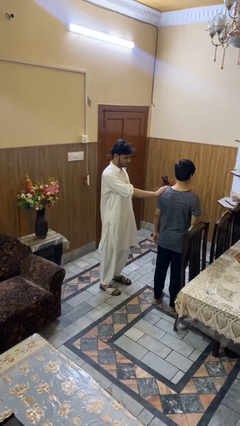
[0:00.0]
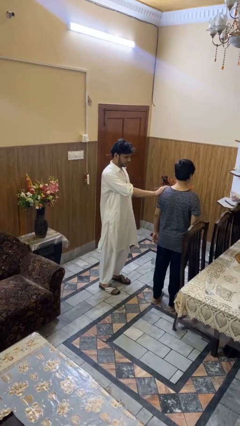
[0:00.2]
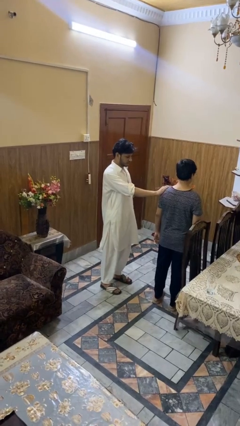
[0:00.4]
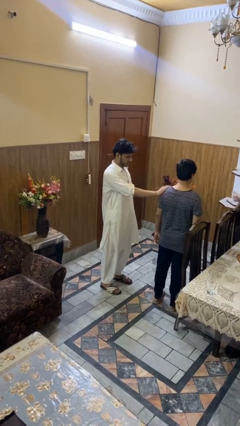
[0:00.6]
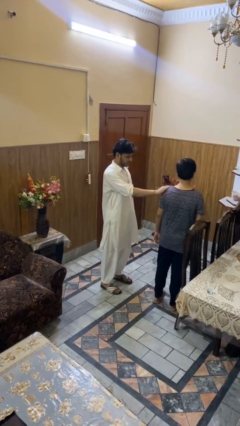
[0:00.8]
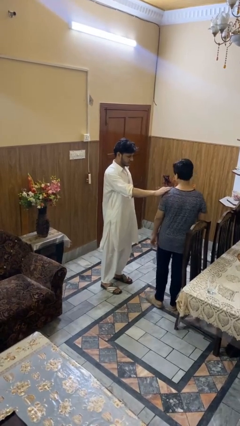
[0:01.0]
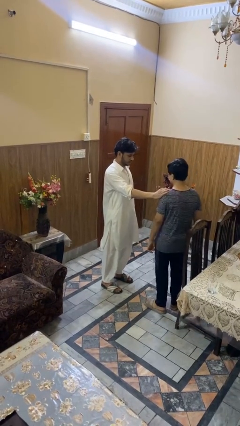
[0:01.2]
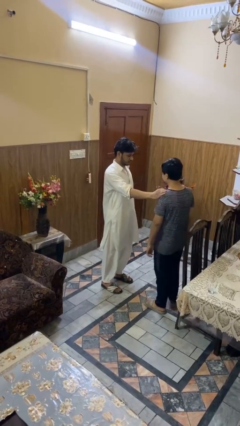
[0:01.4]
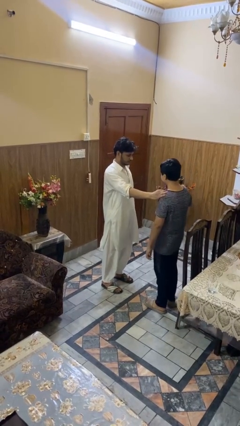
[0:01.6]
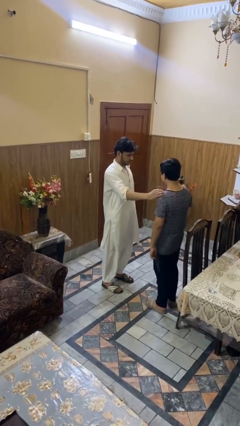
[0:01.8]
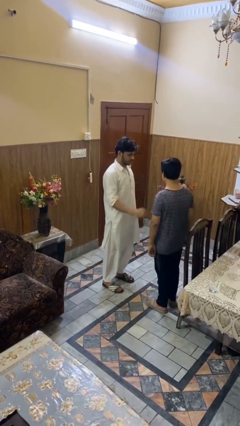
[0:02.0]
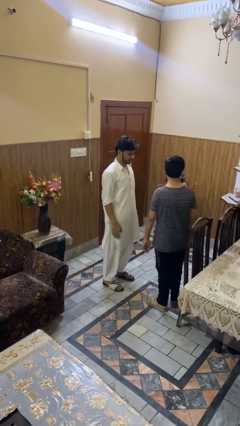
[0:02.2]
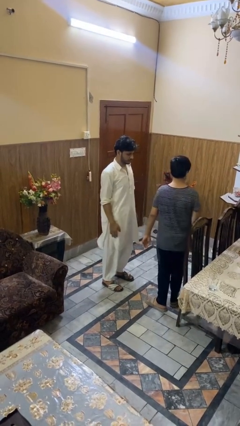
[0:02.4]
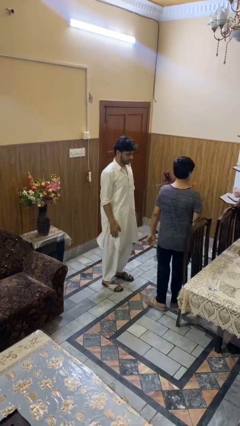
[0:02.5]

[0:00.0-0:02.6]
person spins person around

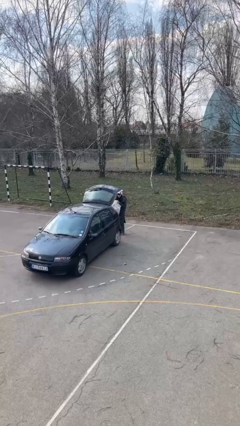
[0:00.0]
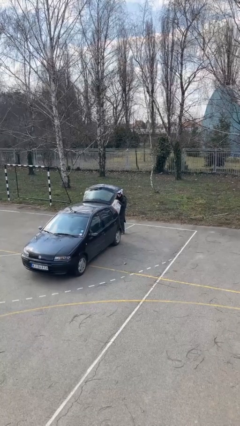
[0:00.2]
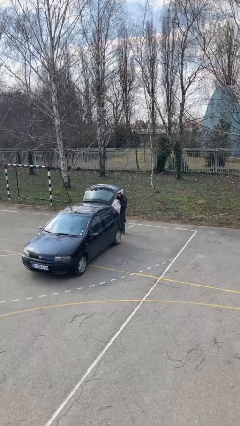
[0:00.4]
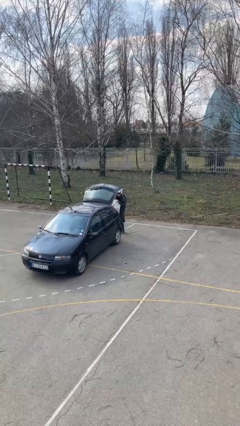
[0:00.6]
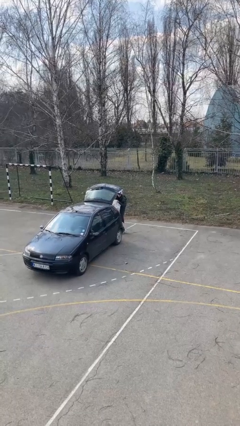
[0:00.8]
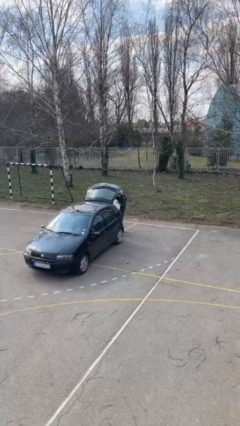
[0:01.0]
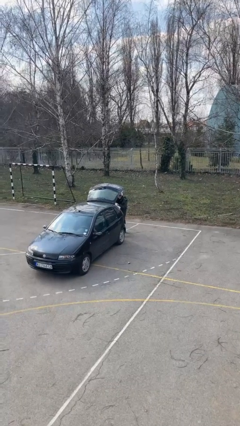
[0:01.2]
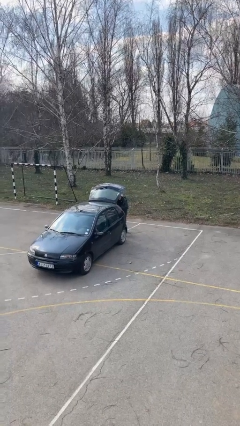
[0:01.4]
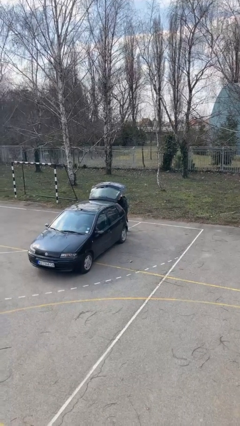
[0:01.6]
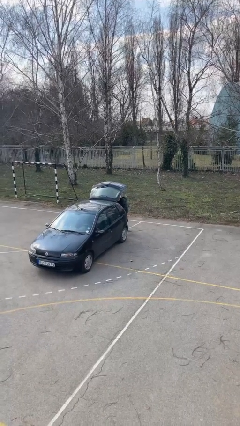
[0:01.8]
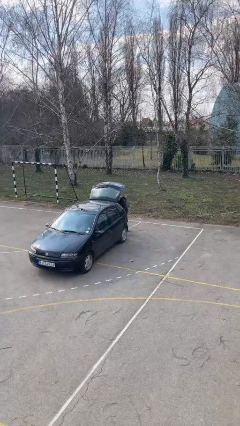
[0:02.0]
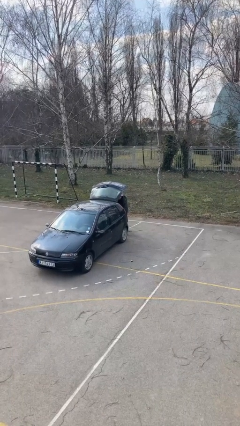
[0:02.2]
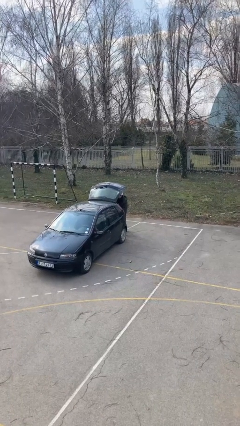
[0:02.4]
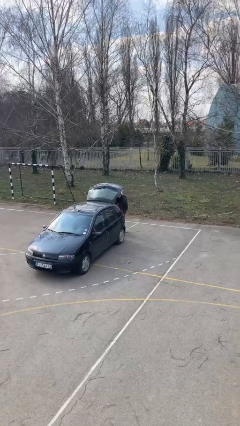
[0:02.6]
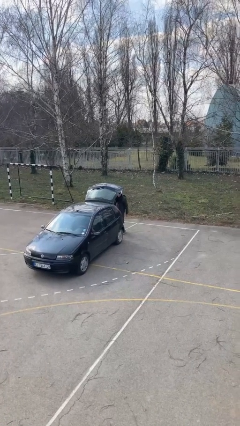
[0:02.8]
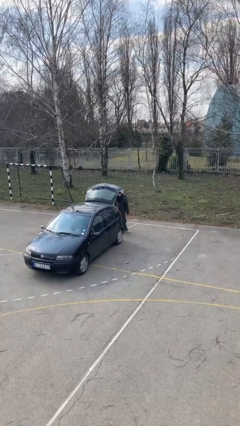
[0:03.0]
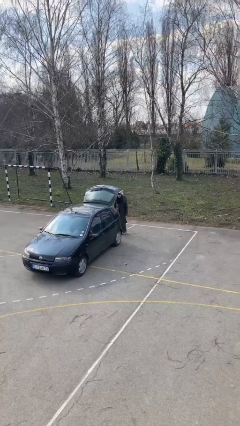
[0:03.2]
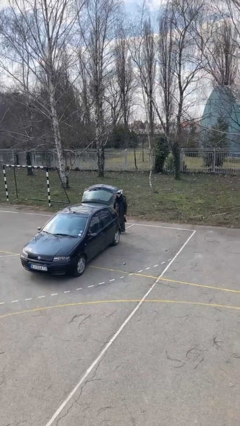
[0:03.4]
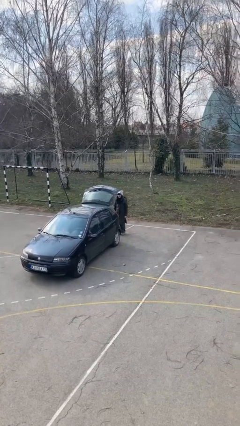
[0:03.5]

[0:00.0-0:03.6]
person loads car

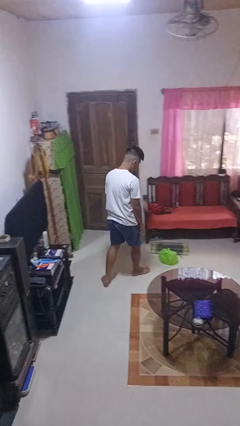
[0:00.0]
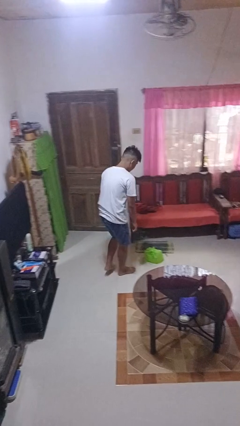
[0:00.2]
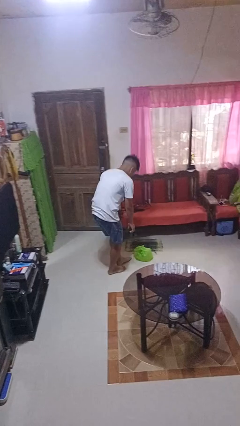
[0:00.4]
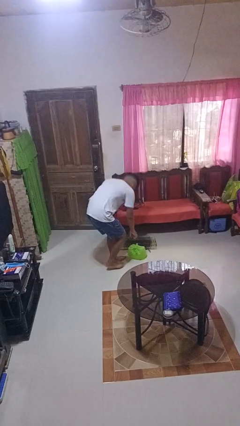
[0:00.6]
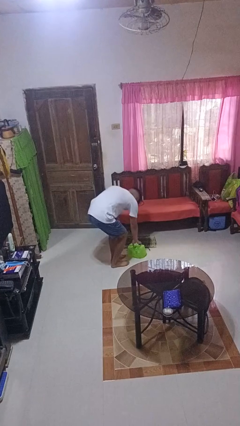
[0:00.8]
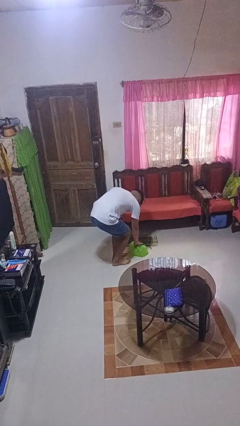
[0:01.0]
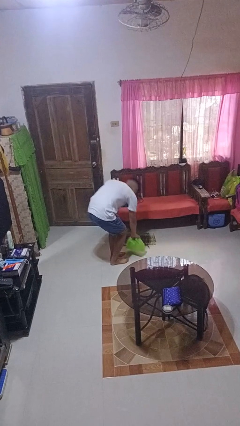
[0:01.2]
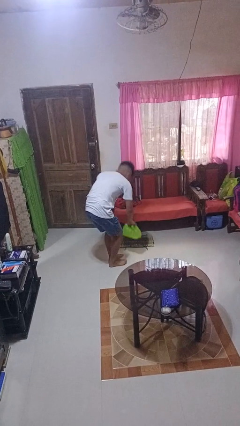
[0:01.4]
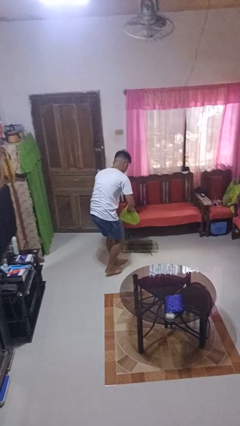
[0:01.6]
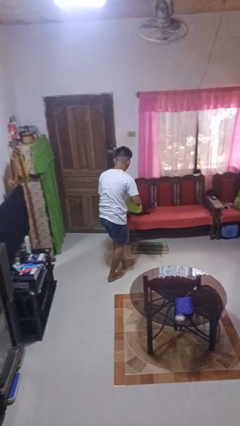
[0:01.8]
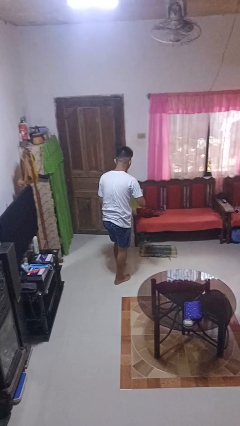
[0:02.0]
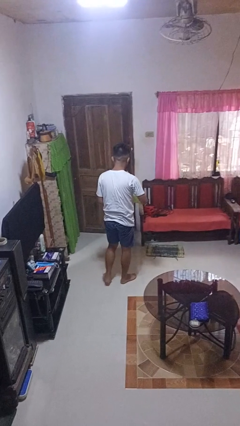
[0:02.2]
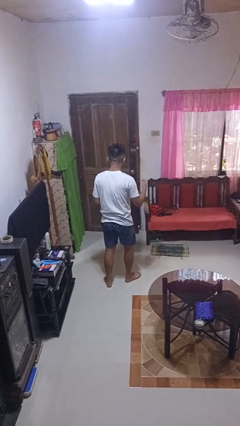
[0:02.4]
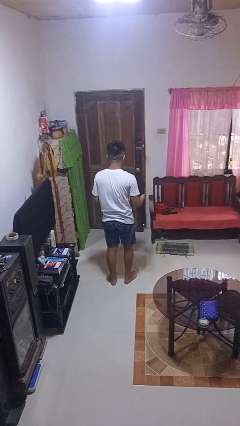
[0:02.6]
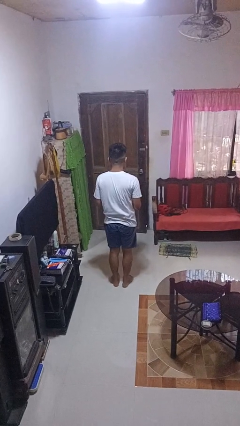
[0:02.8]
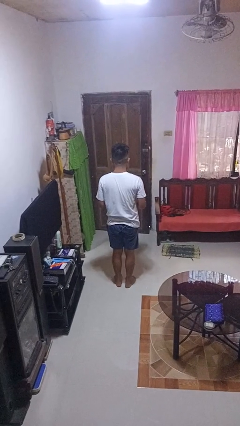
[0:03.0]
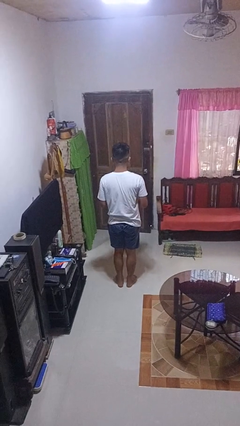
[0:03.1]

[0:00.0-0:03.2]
person picks up object from floor

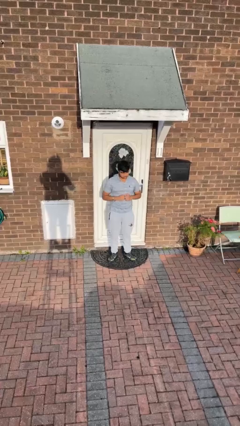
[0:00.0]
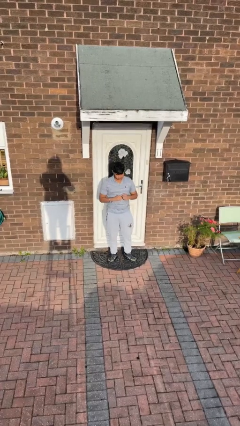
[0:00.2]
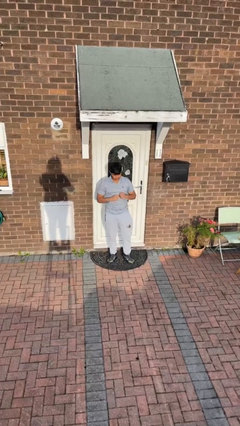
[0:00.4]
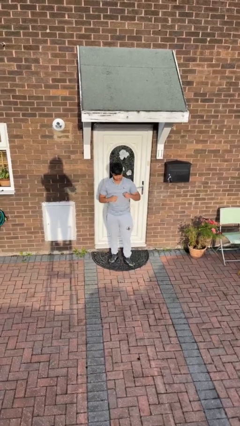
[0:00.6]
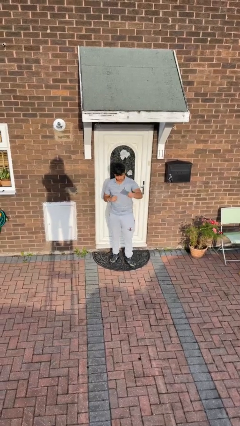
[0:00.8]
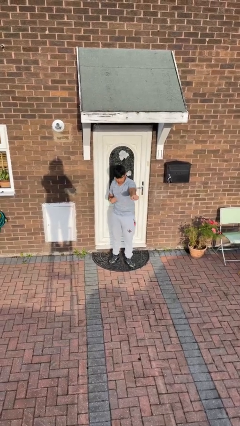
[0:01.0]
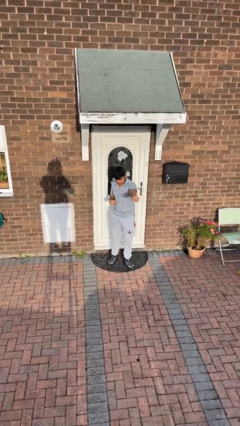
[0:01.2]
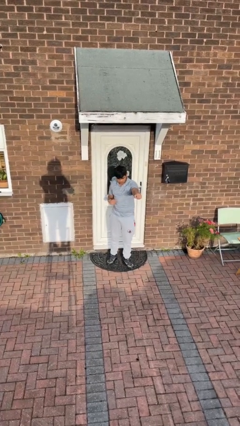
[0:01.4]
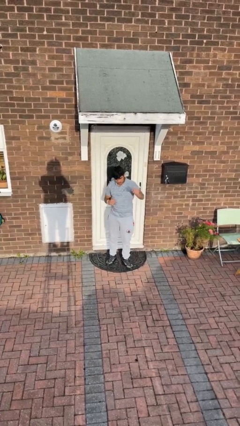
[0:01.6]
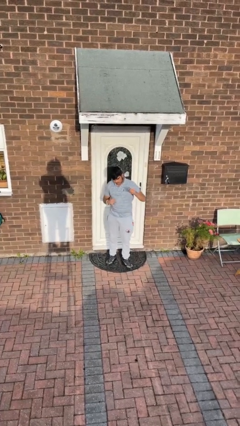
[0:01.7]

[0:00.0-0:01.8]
person punches

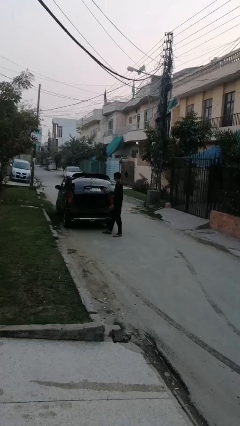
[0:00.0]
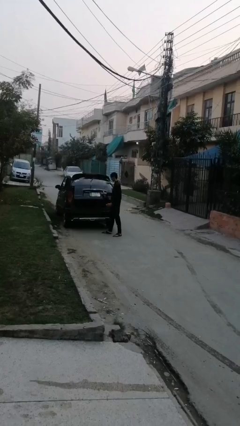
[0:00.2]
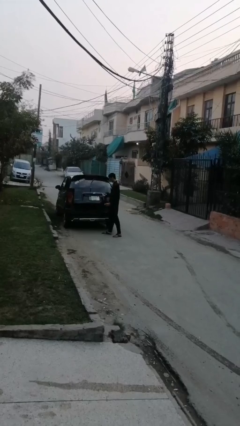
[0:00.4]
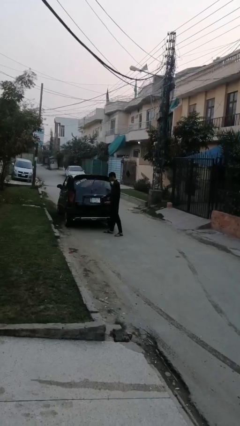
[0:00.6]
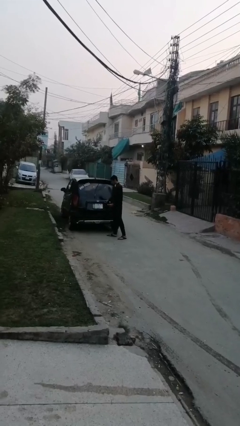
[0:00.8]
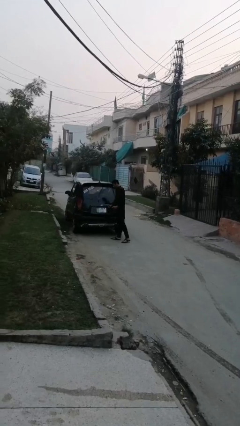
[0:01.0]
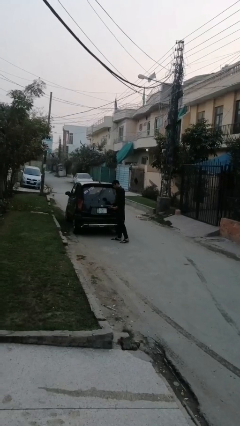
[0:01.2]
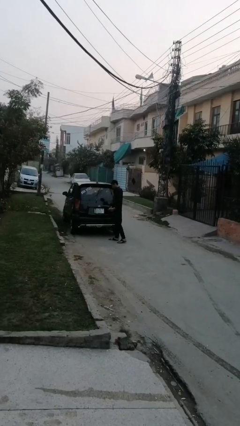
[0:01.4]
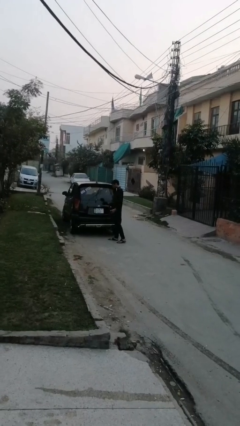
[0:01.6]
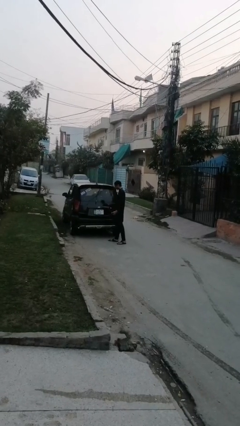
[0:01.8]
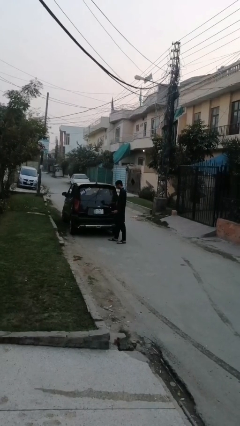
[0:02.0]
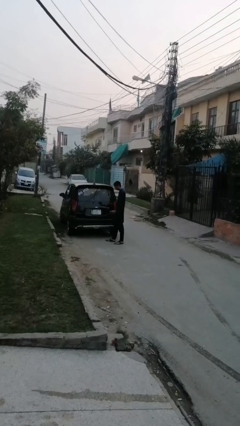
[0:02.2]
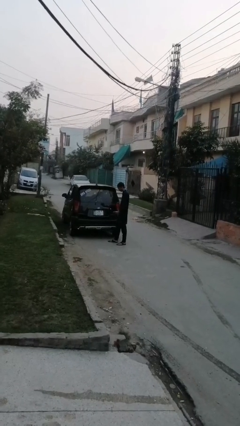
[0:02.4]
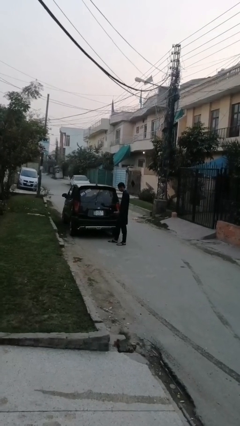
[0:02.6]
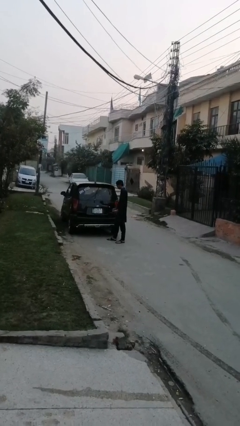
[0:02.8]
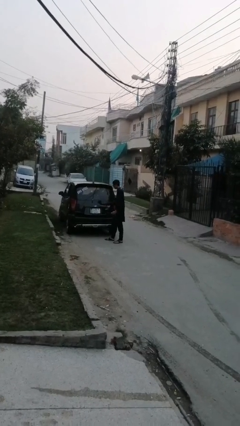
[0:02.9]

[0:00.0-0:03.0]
person closes car trunk

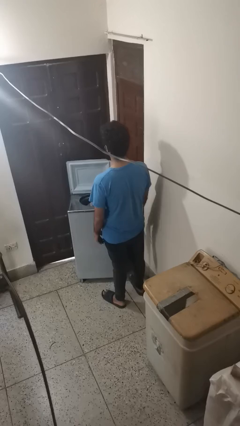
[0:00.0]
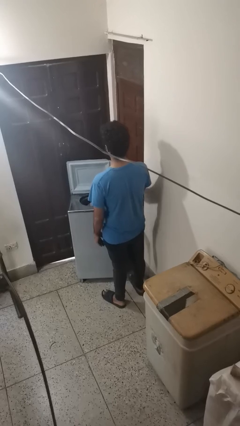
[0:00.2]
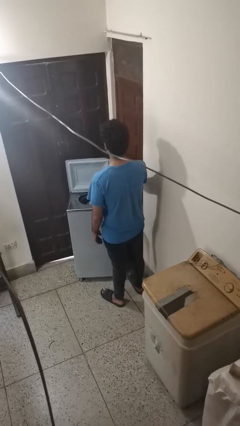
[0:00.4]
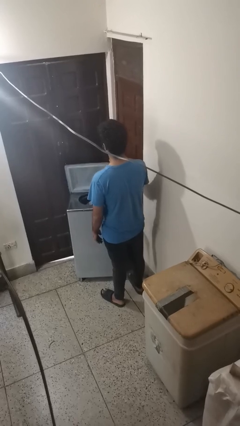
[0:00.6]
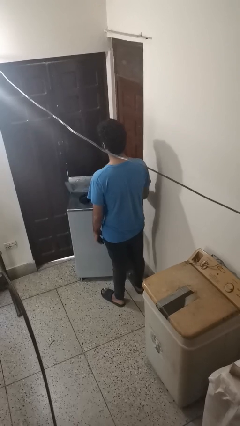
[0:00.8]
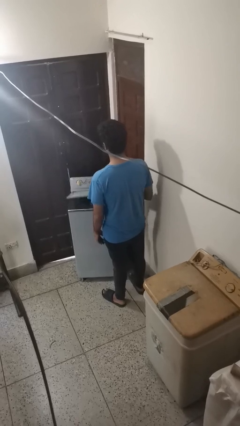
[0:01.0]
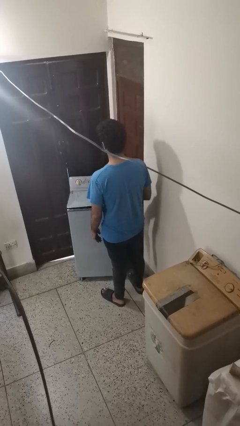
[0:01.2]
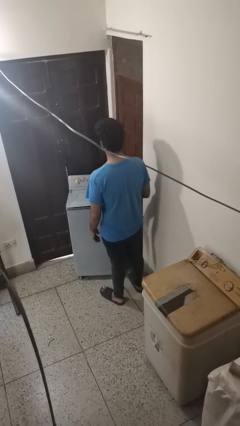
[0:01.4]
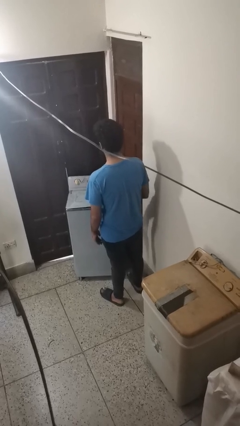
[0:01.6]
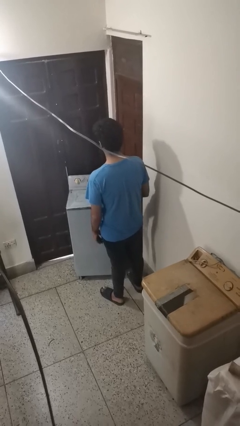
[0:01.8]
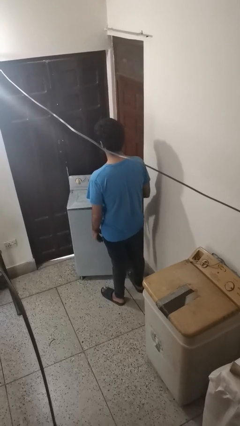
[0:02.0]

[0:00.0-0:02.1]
person closes clothes washer

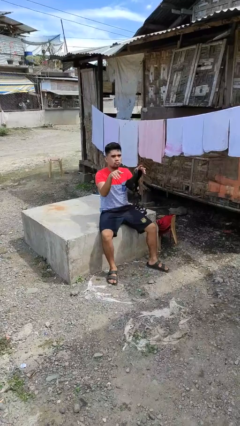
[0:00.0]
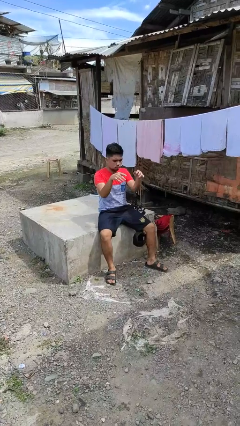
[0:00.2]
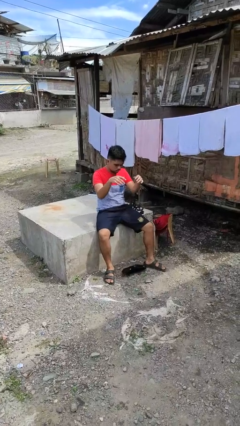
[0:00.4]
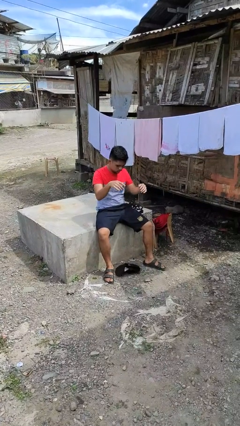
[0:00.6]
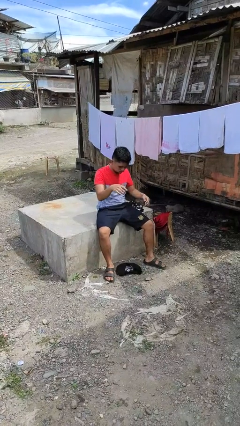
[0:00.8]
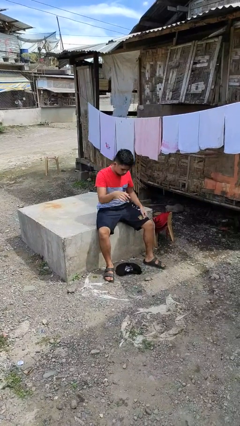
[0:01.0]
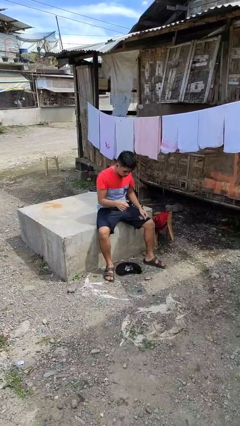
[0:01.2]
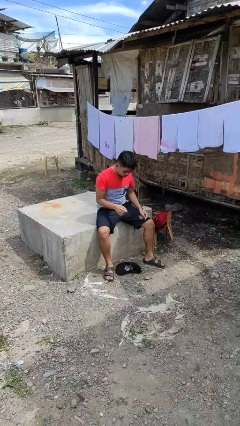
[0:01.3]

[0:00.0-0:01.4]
person drops object
